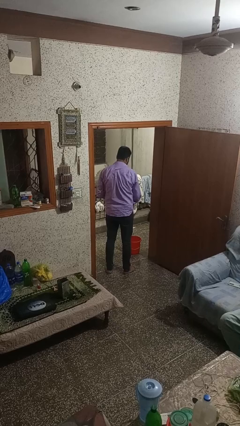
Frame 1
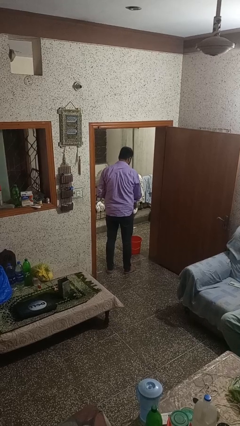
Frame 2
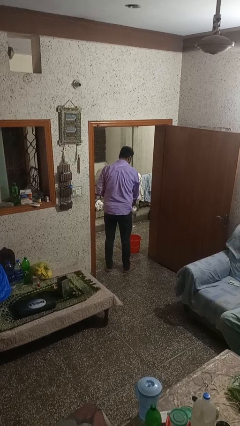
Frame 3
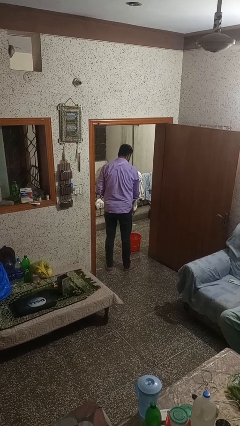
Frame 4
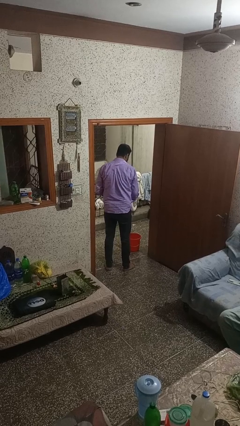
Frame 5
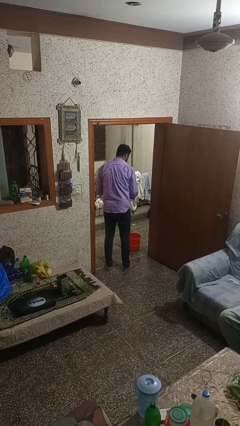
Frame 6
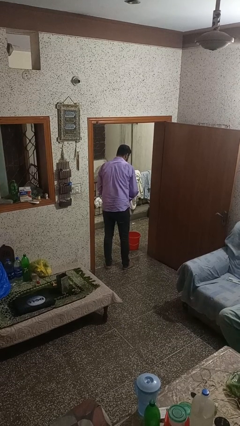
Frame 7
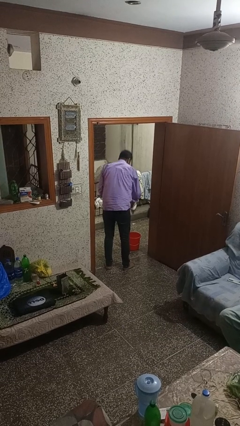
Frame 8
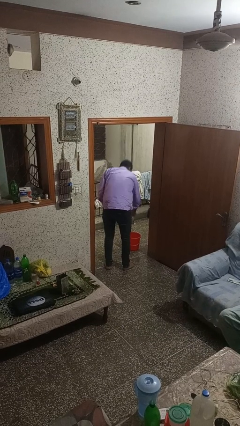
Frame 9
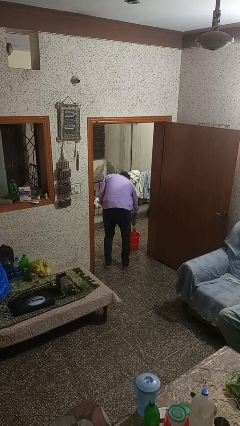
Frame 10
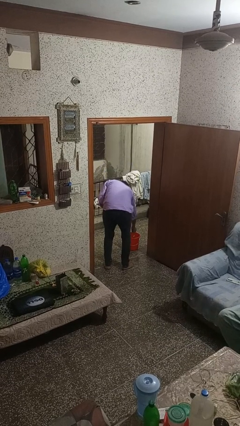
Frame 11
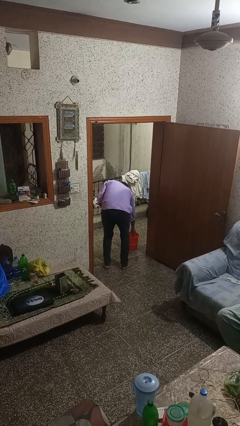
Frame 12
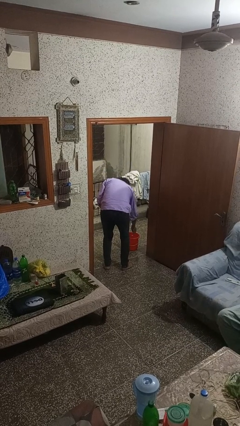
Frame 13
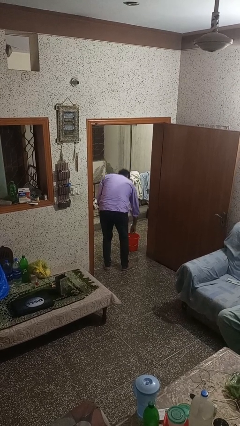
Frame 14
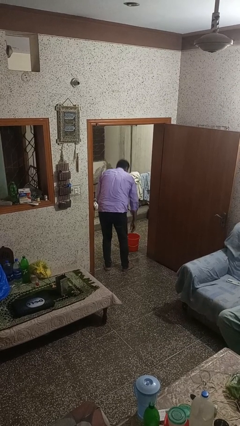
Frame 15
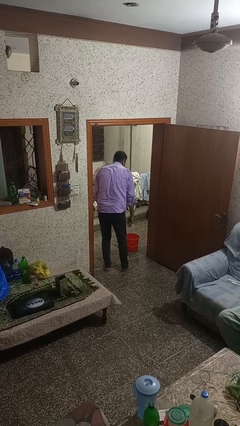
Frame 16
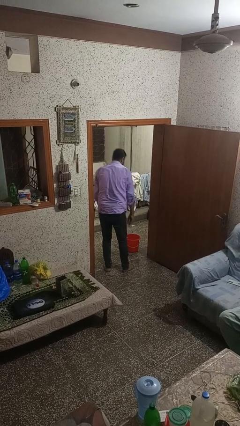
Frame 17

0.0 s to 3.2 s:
person discards trash

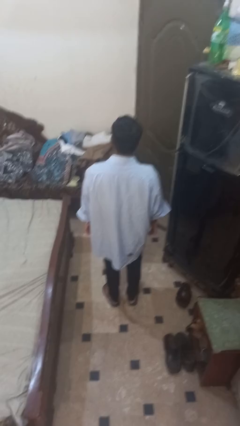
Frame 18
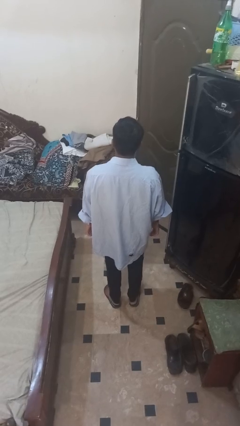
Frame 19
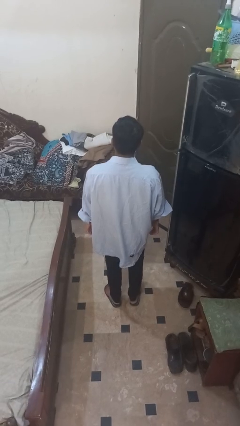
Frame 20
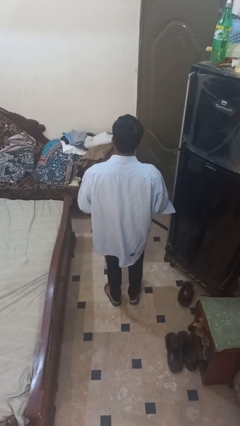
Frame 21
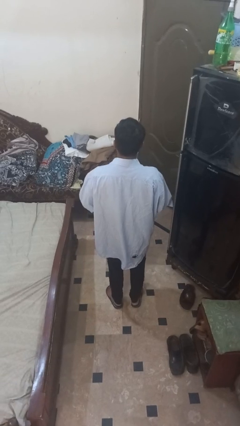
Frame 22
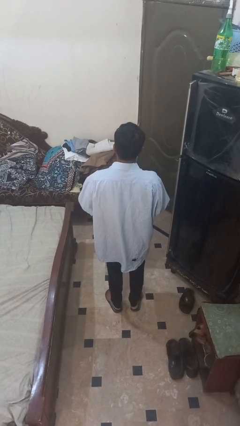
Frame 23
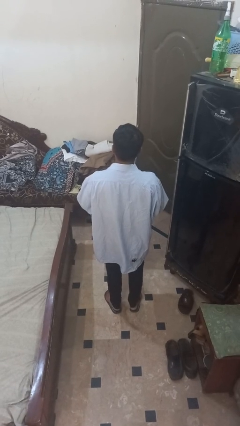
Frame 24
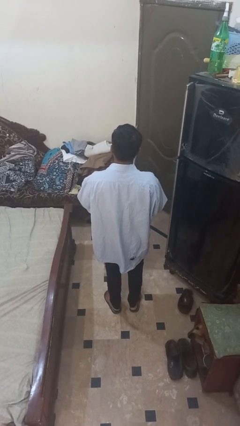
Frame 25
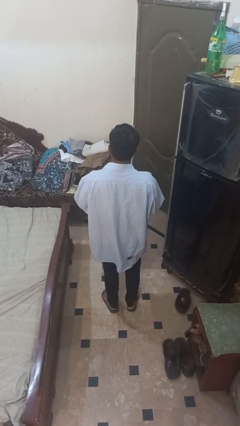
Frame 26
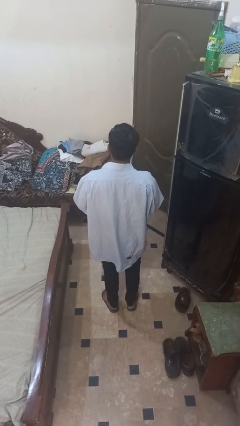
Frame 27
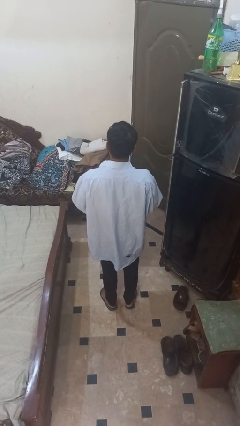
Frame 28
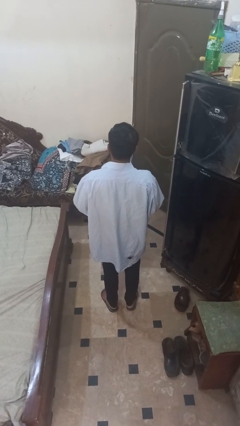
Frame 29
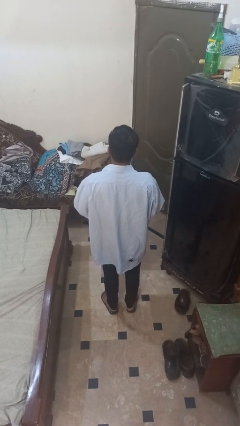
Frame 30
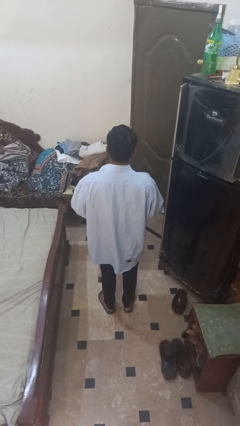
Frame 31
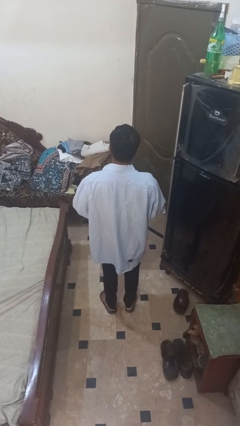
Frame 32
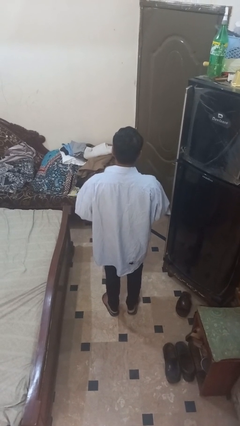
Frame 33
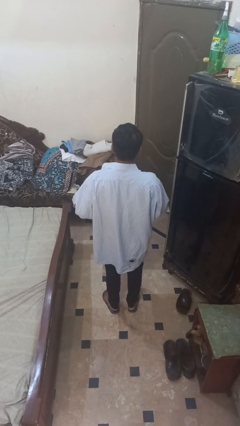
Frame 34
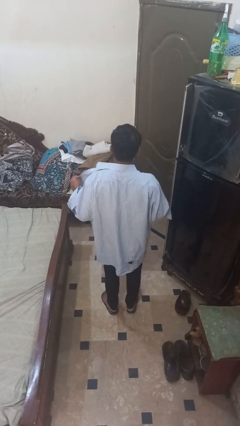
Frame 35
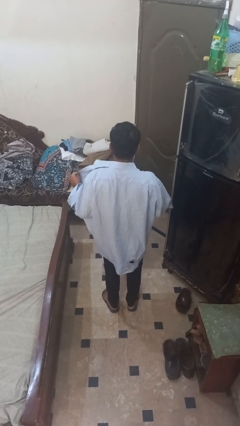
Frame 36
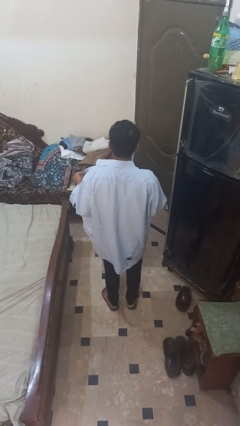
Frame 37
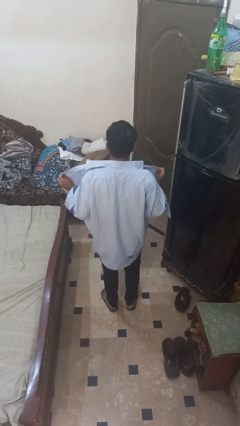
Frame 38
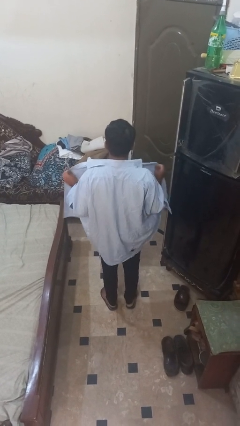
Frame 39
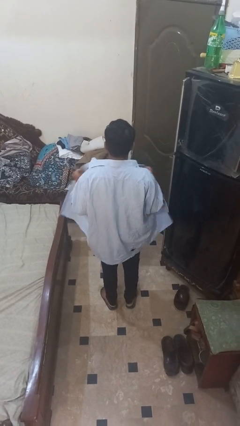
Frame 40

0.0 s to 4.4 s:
person unbuttons shirt

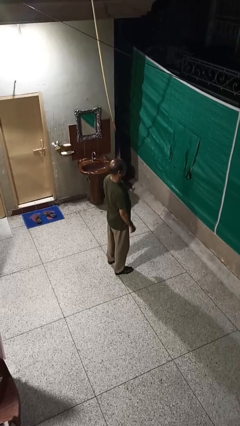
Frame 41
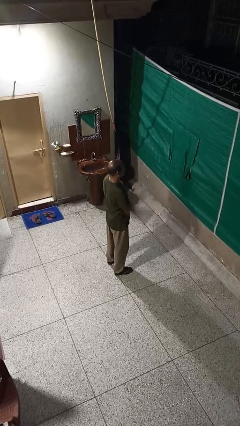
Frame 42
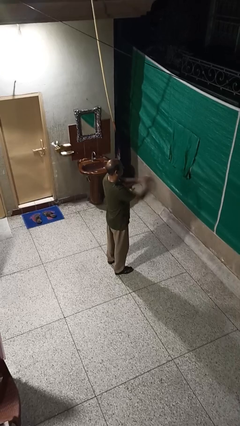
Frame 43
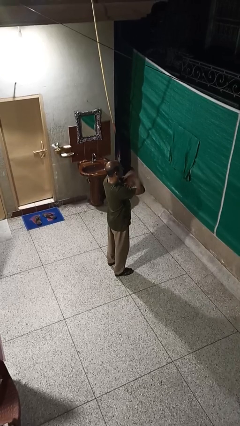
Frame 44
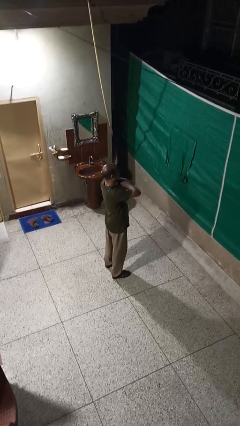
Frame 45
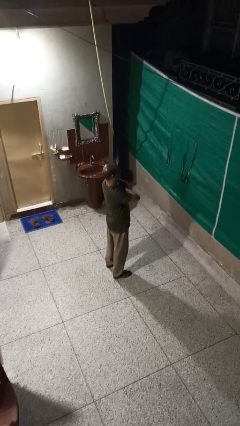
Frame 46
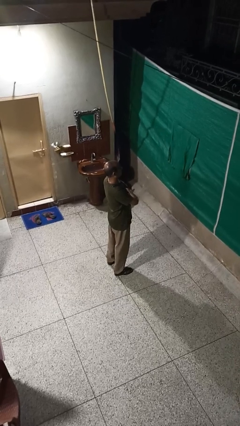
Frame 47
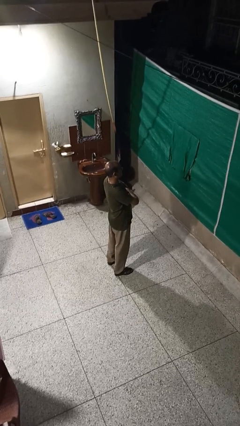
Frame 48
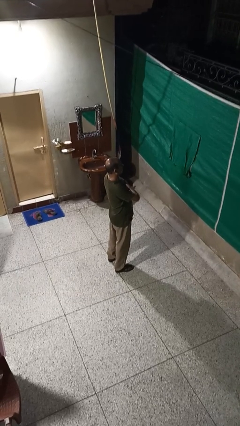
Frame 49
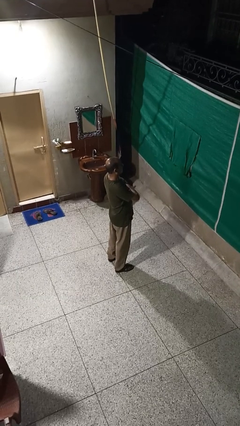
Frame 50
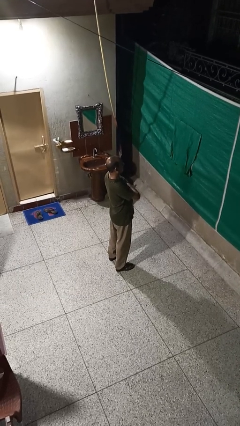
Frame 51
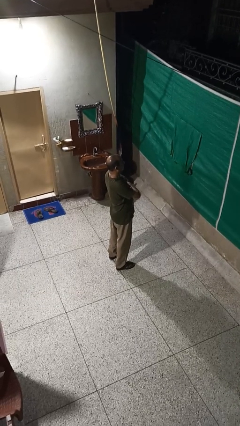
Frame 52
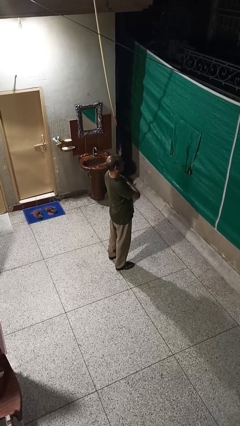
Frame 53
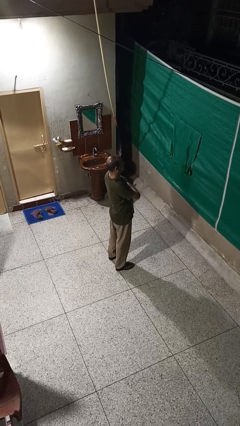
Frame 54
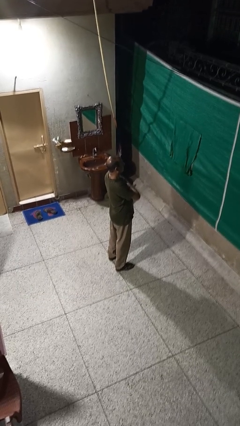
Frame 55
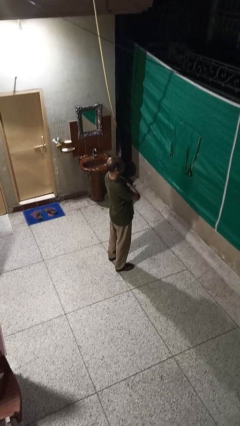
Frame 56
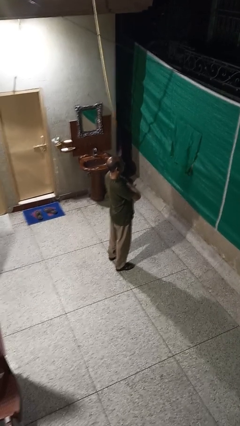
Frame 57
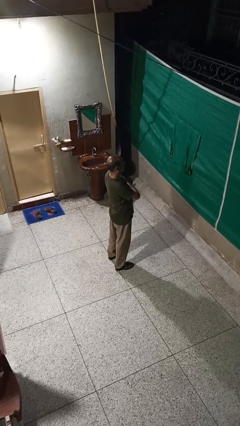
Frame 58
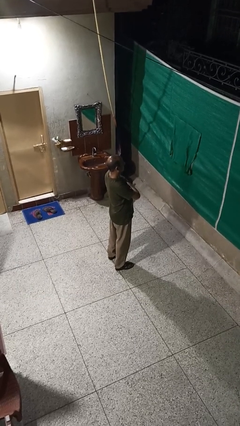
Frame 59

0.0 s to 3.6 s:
person crosses arms

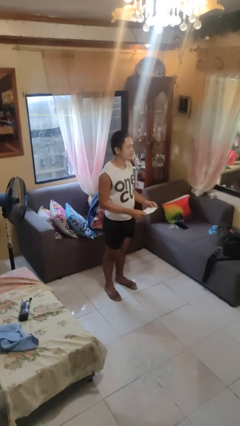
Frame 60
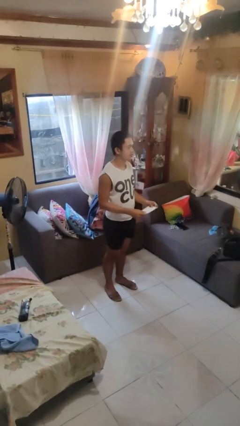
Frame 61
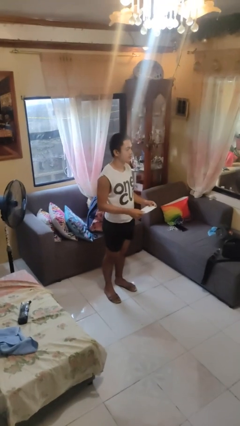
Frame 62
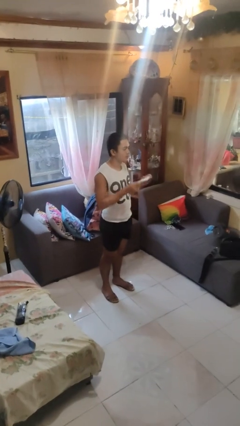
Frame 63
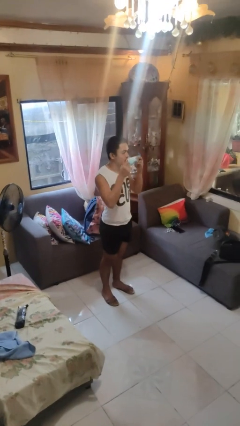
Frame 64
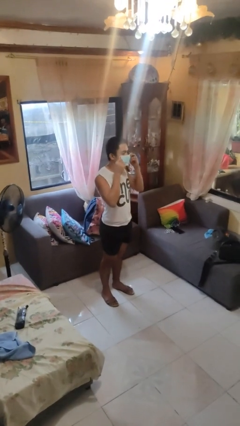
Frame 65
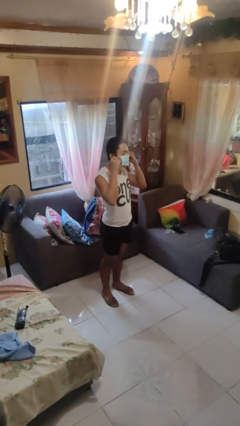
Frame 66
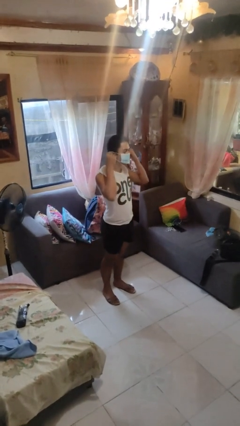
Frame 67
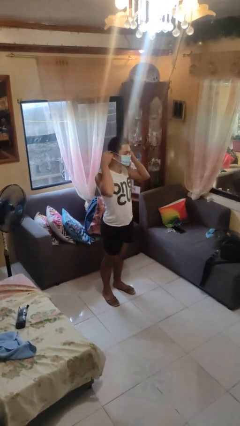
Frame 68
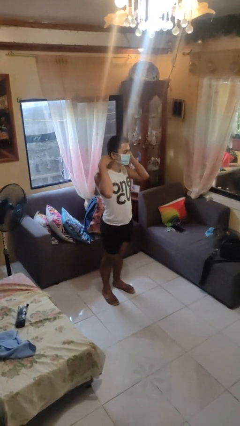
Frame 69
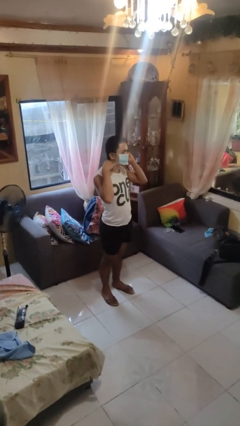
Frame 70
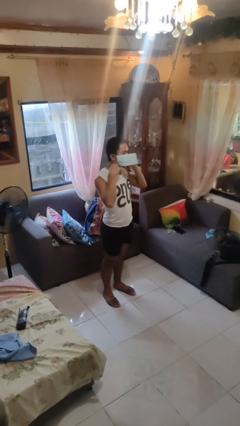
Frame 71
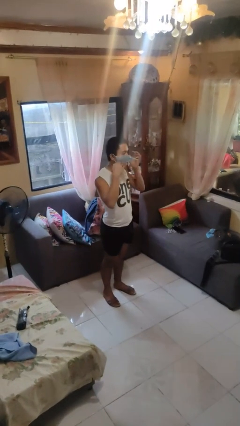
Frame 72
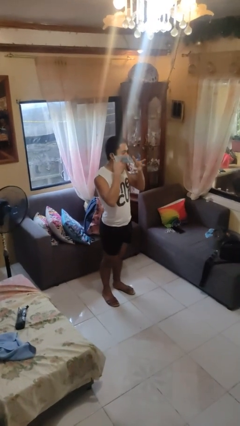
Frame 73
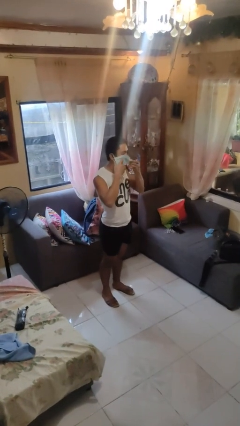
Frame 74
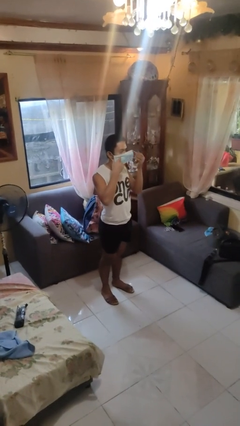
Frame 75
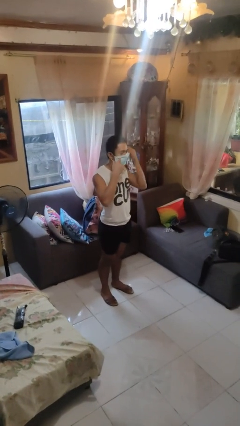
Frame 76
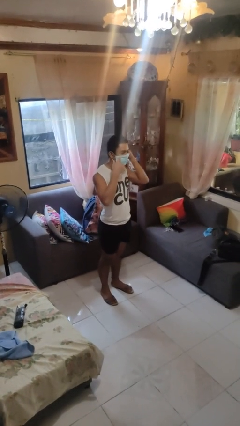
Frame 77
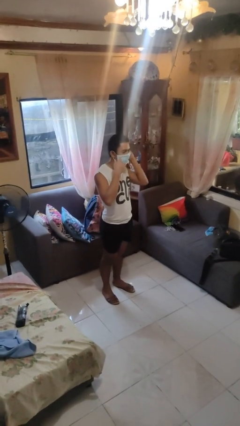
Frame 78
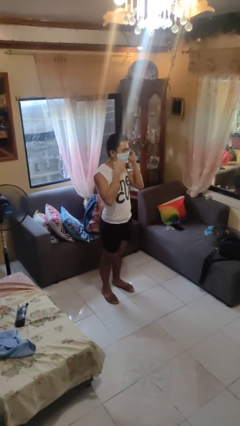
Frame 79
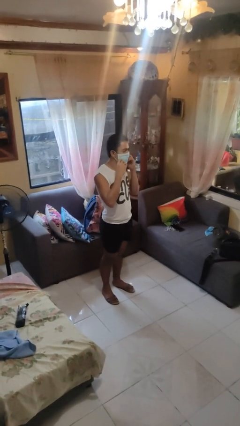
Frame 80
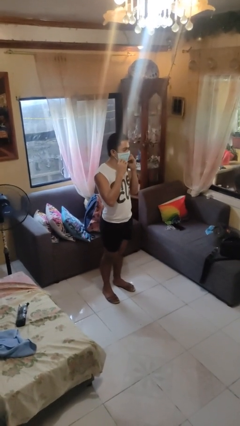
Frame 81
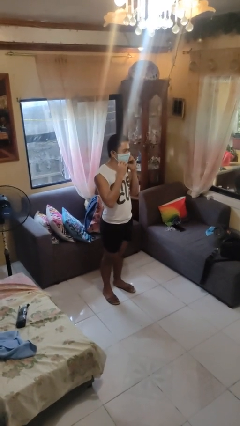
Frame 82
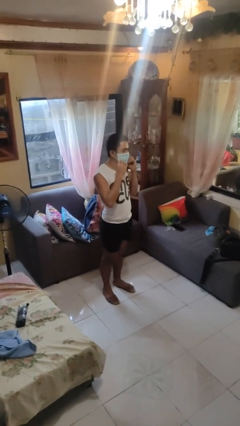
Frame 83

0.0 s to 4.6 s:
person puts on facemask

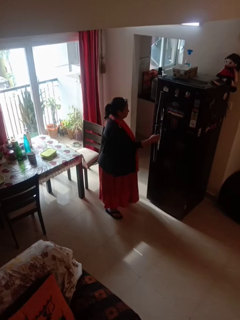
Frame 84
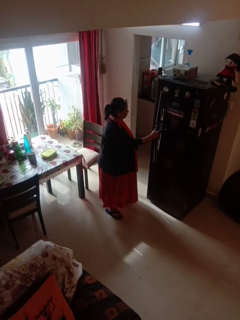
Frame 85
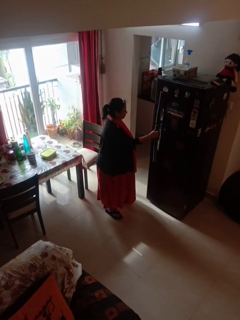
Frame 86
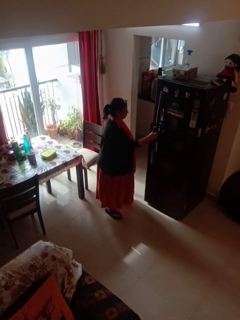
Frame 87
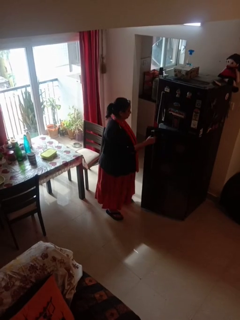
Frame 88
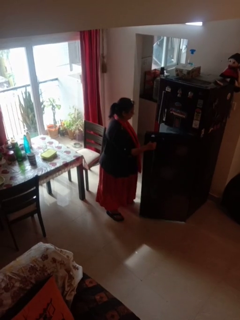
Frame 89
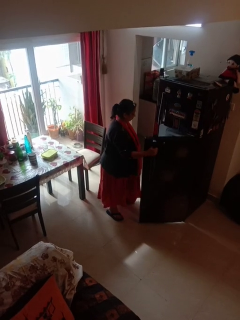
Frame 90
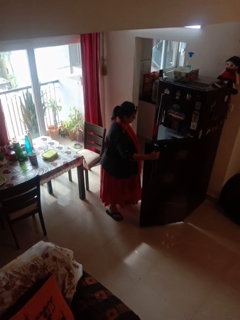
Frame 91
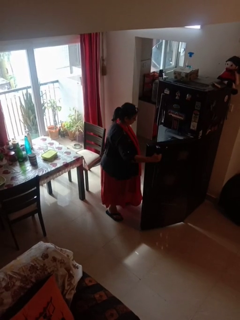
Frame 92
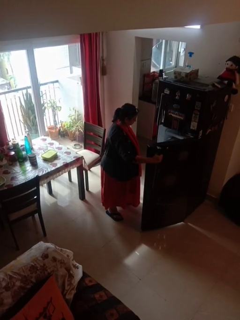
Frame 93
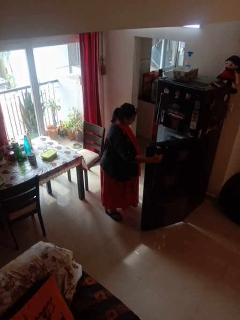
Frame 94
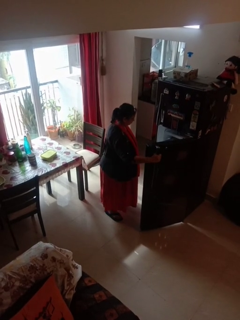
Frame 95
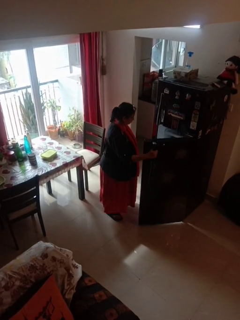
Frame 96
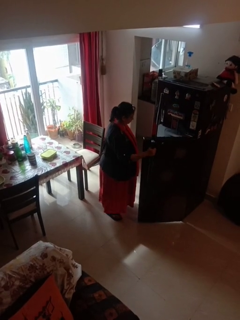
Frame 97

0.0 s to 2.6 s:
person opens refrigerator

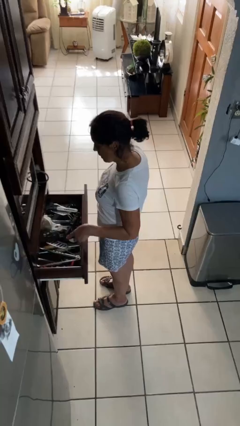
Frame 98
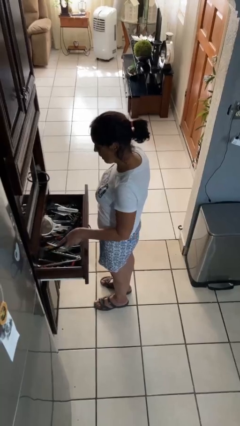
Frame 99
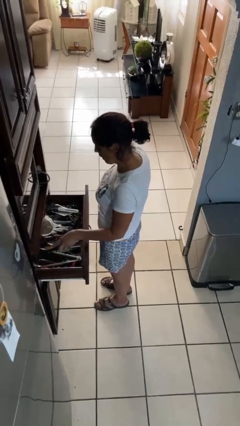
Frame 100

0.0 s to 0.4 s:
person puts object into kitchen drawer
